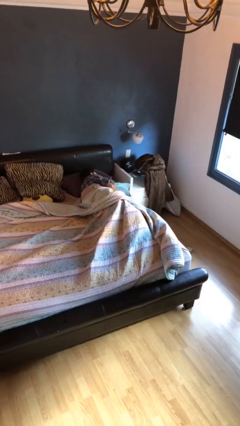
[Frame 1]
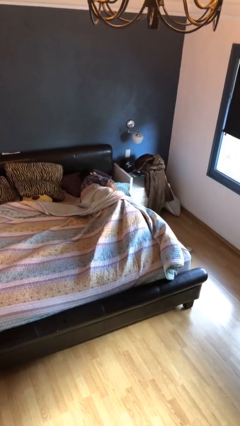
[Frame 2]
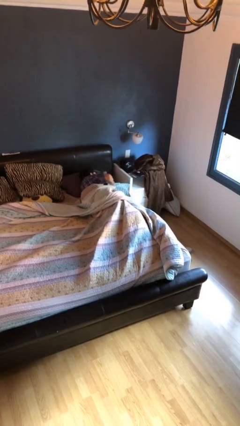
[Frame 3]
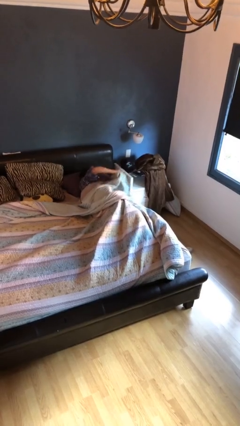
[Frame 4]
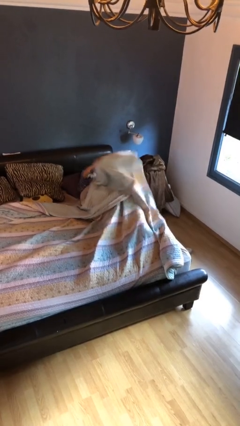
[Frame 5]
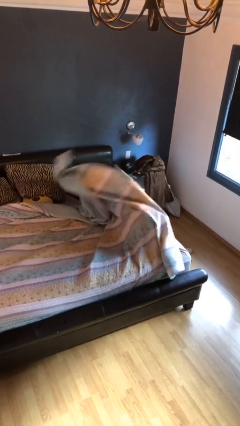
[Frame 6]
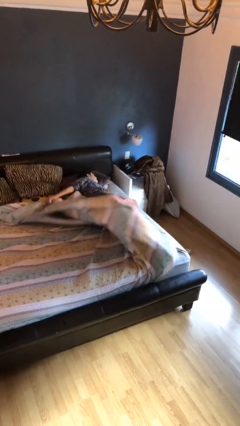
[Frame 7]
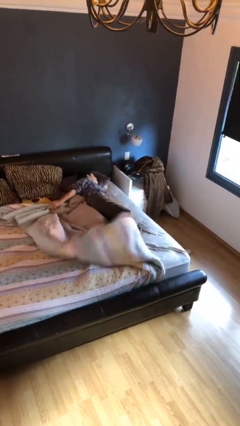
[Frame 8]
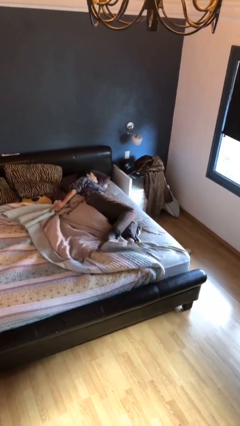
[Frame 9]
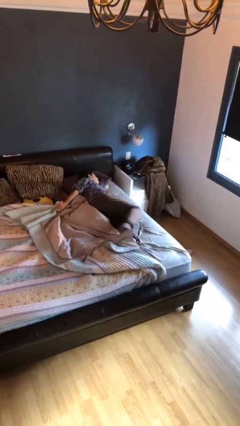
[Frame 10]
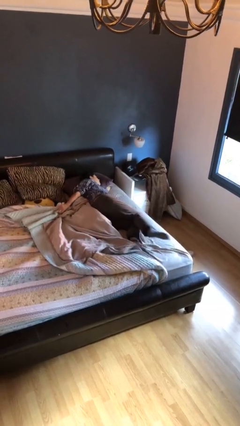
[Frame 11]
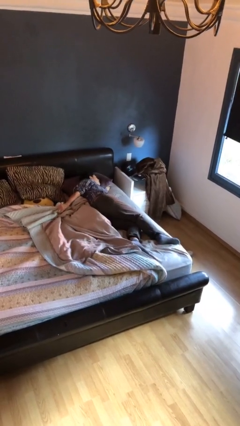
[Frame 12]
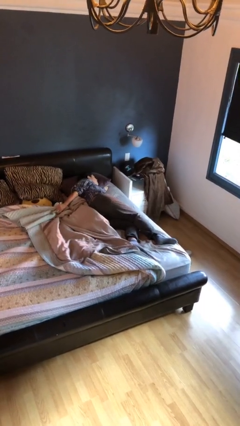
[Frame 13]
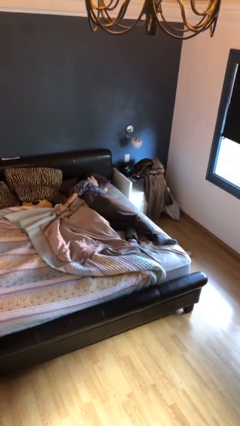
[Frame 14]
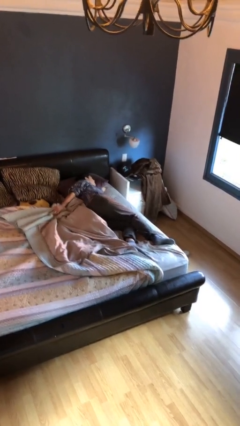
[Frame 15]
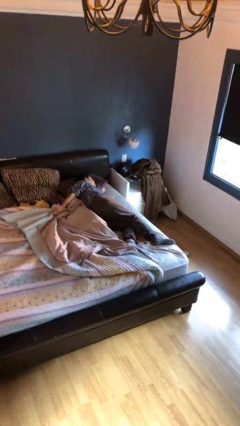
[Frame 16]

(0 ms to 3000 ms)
person uncovers with bedsheets

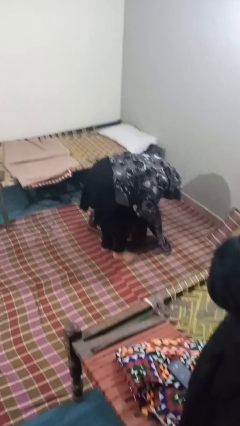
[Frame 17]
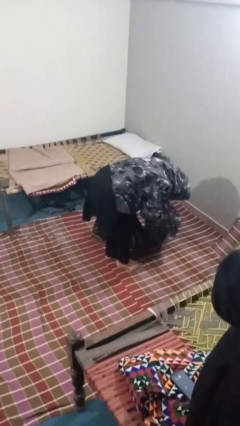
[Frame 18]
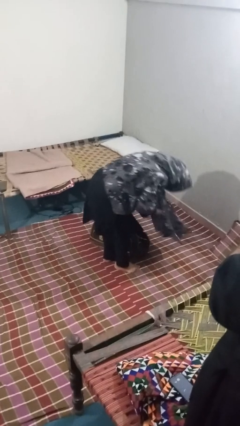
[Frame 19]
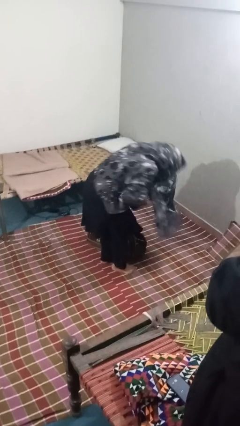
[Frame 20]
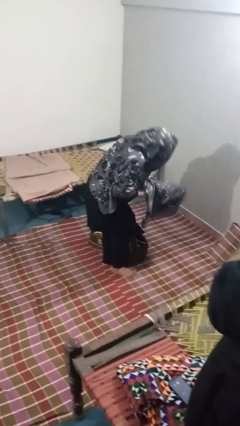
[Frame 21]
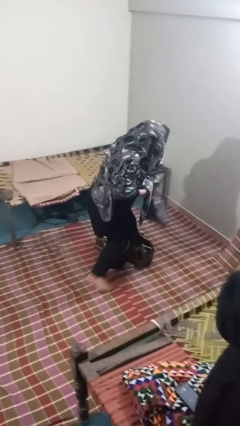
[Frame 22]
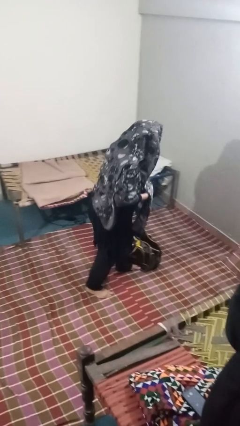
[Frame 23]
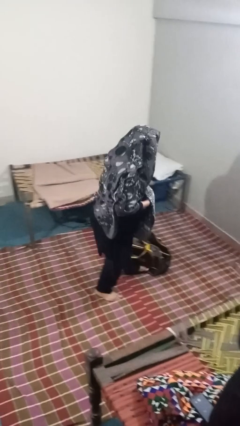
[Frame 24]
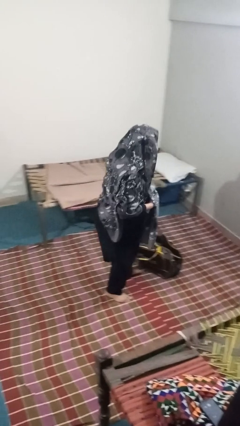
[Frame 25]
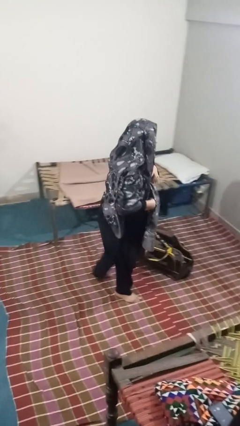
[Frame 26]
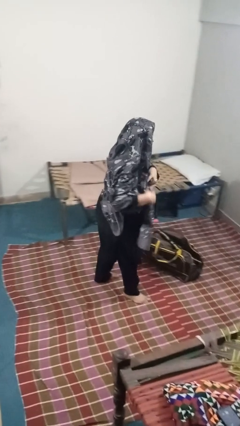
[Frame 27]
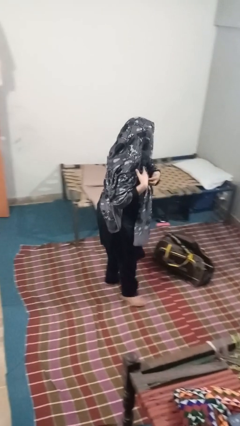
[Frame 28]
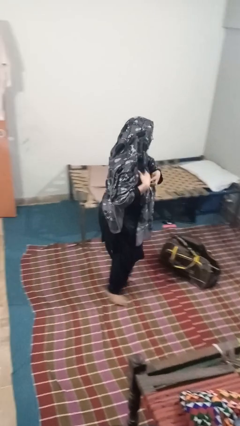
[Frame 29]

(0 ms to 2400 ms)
person stands up from floor

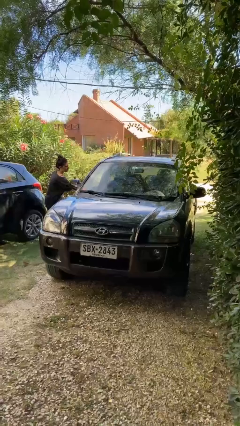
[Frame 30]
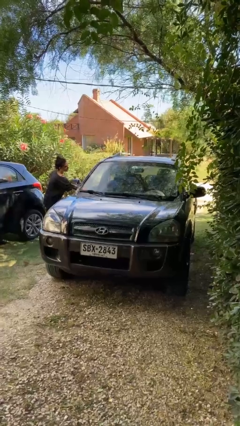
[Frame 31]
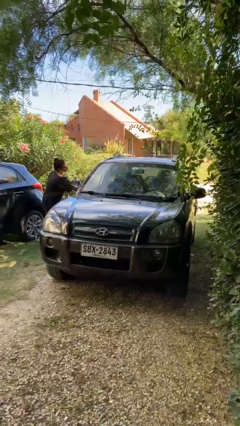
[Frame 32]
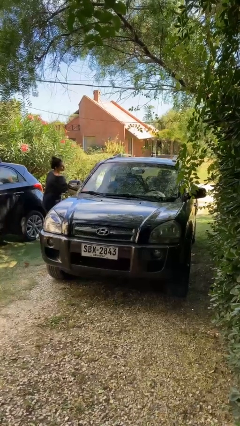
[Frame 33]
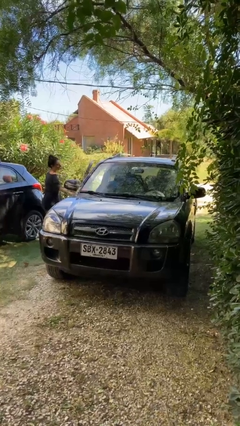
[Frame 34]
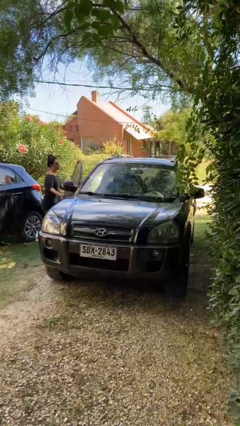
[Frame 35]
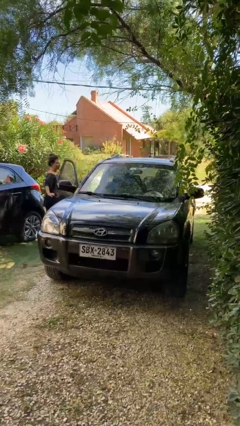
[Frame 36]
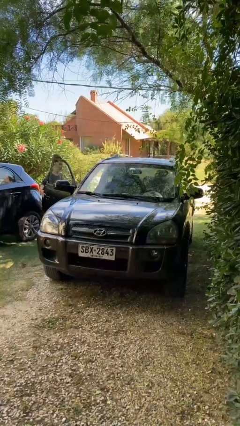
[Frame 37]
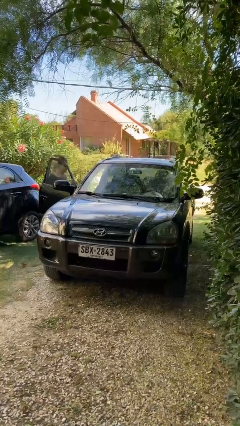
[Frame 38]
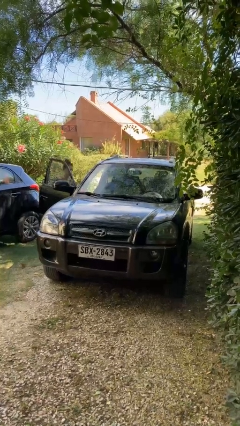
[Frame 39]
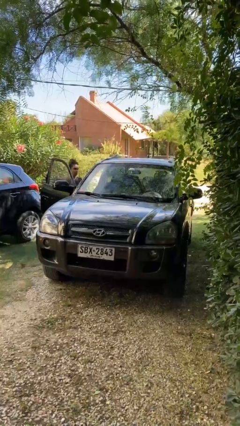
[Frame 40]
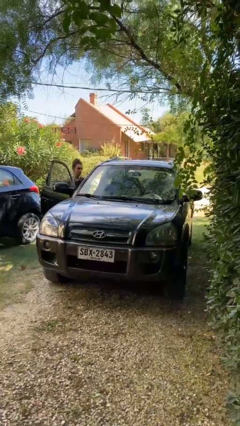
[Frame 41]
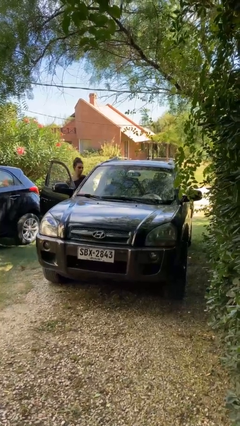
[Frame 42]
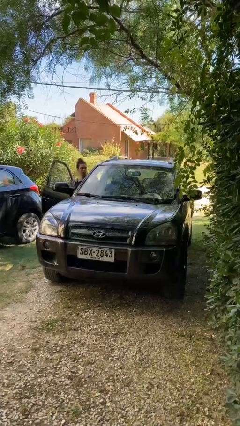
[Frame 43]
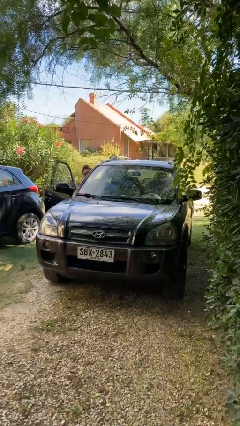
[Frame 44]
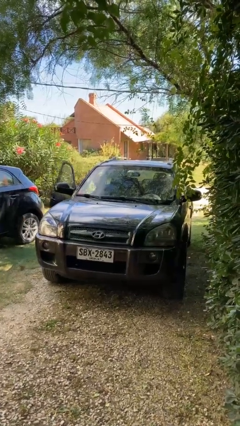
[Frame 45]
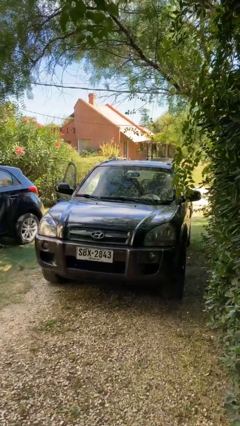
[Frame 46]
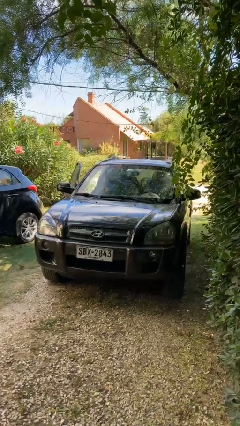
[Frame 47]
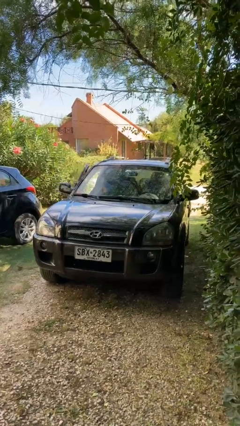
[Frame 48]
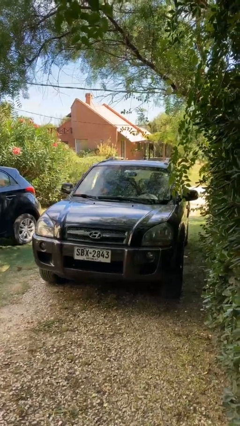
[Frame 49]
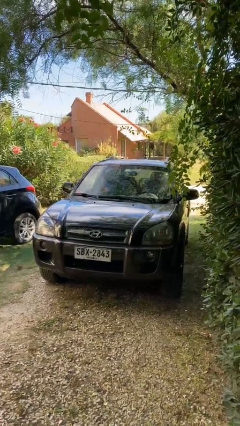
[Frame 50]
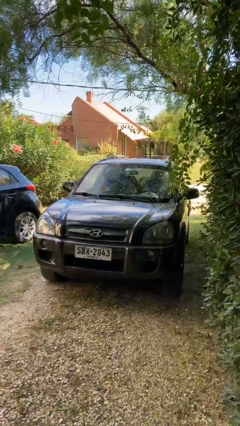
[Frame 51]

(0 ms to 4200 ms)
car picks up person

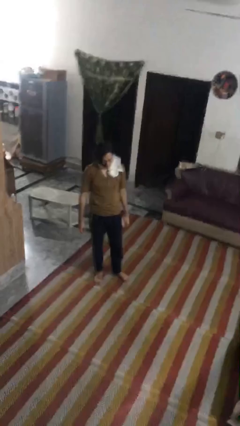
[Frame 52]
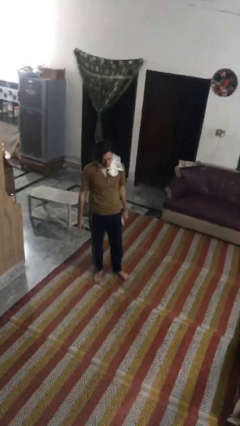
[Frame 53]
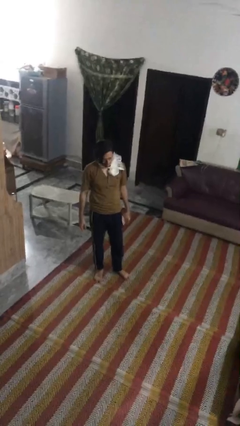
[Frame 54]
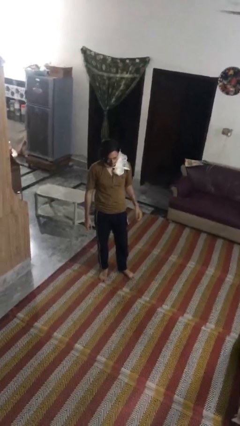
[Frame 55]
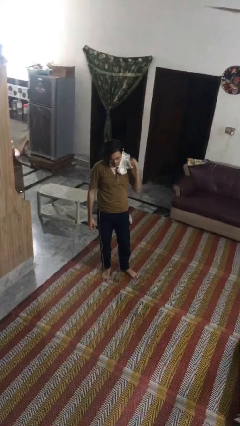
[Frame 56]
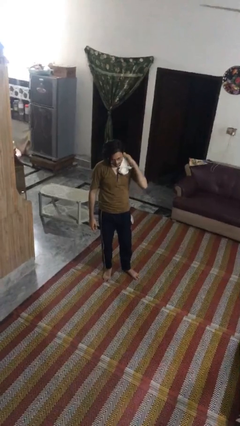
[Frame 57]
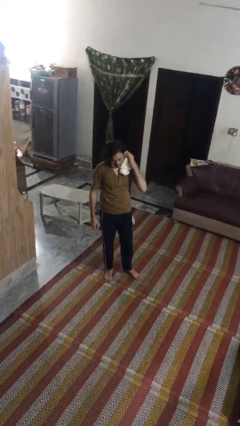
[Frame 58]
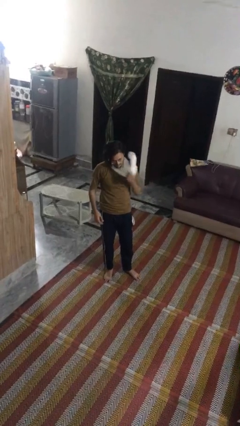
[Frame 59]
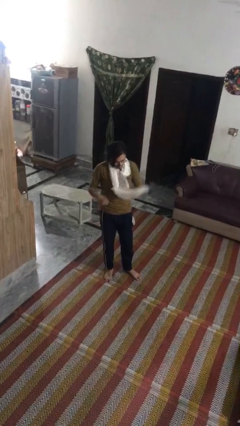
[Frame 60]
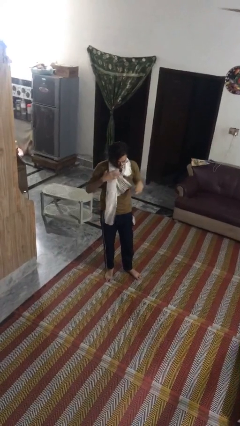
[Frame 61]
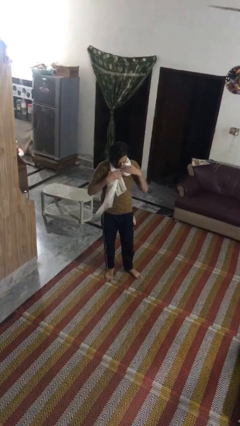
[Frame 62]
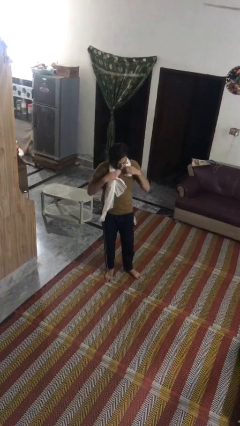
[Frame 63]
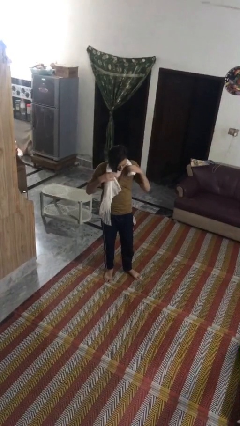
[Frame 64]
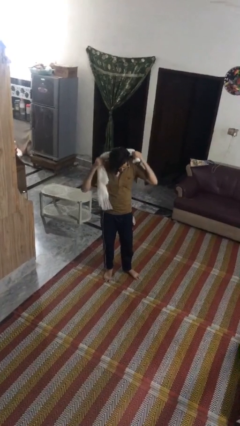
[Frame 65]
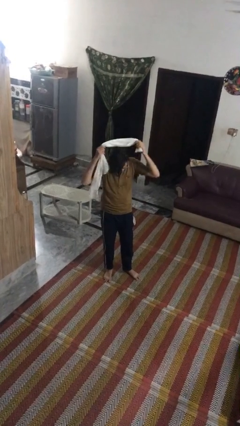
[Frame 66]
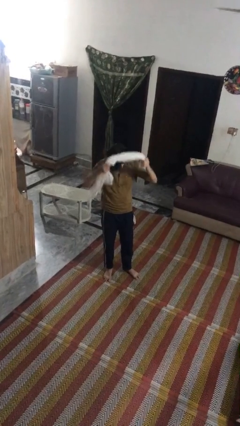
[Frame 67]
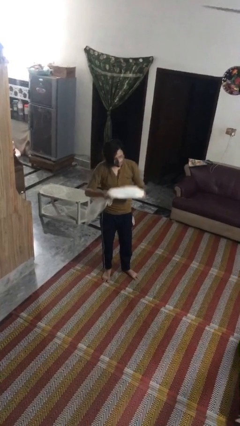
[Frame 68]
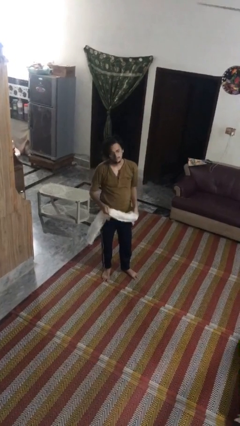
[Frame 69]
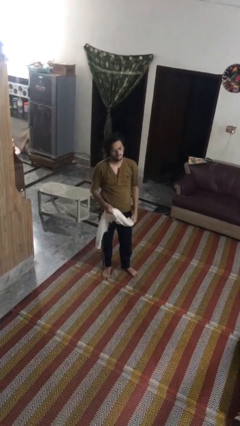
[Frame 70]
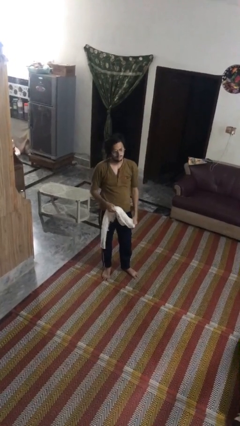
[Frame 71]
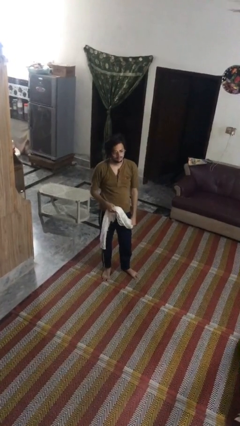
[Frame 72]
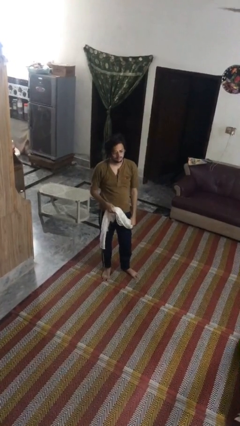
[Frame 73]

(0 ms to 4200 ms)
person takes off scarf

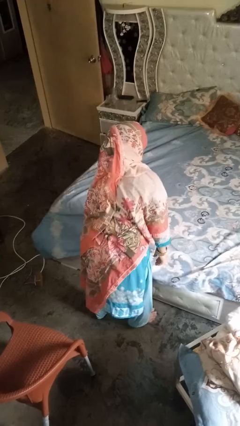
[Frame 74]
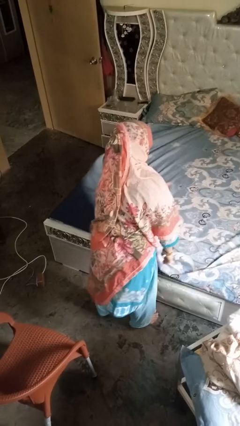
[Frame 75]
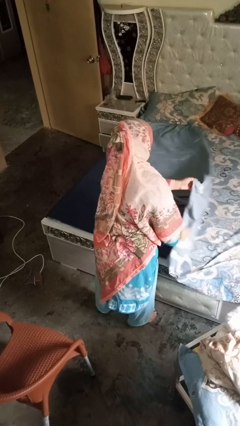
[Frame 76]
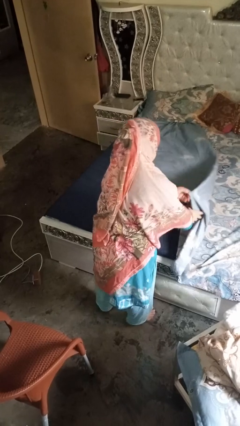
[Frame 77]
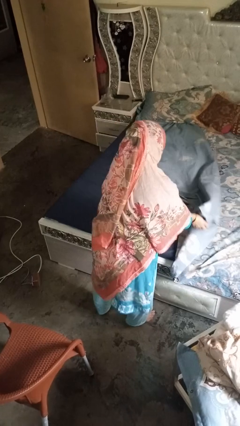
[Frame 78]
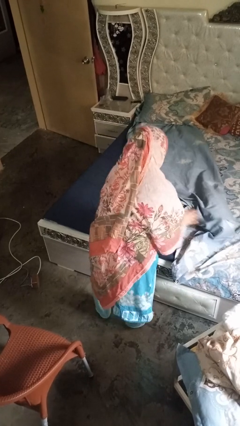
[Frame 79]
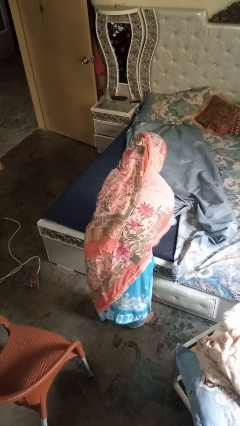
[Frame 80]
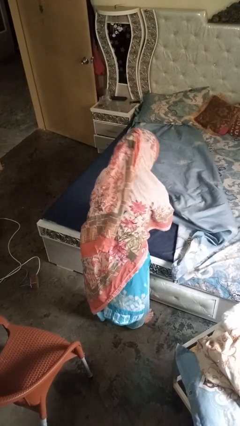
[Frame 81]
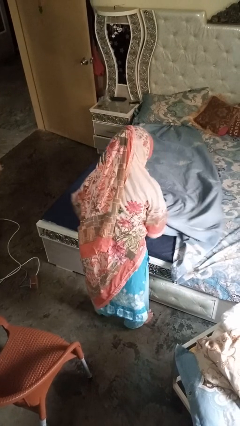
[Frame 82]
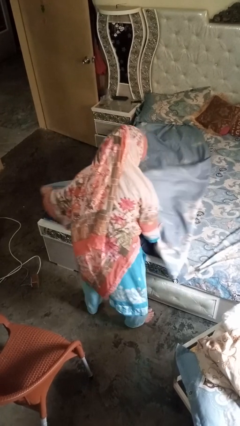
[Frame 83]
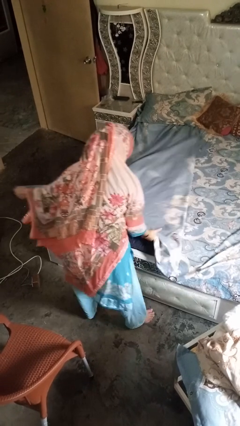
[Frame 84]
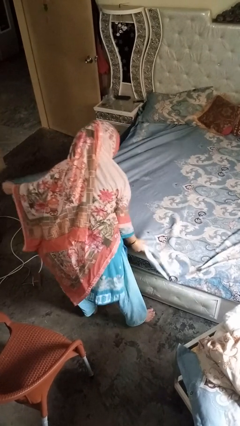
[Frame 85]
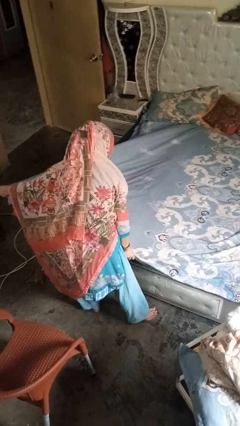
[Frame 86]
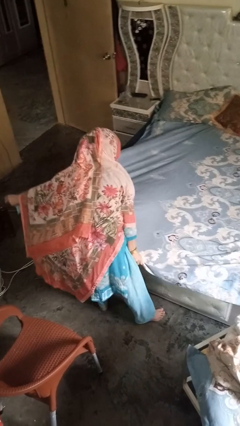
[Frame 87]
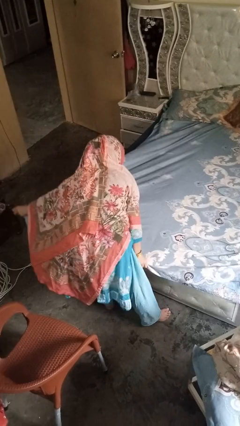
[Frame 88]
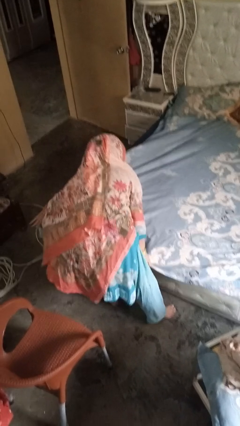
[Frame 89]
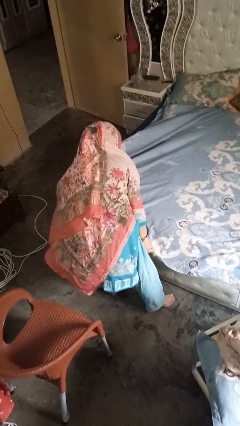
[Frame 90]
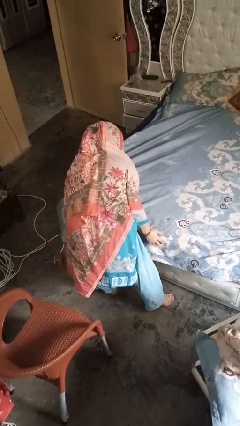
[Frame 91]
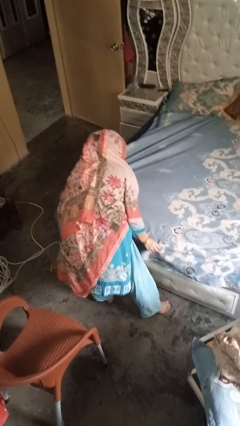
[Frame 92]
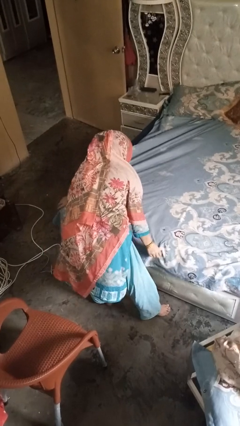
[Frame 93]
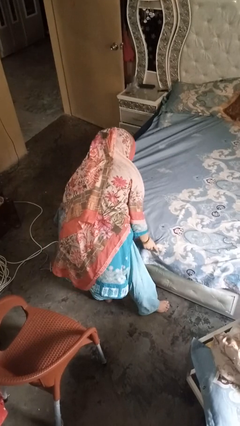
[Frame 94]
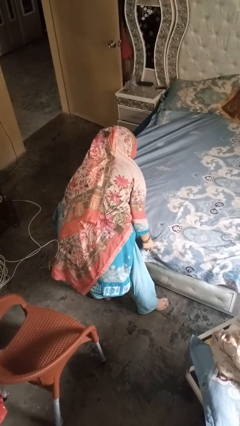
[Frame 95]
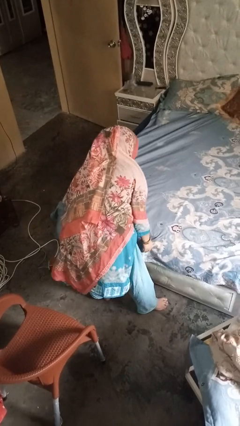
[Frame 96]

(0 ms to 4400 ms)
person makes bed
